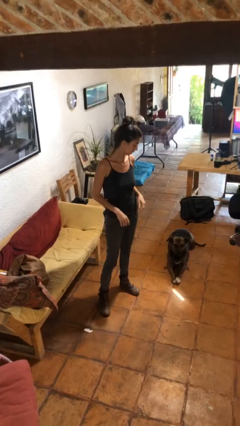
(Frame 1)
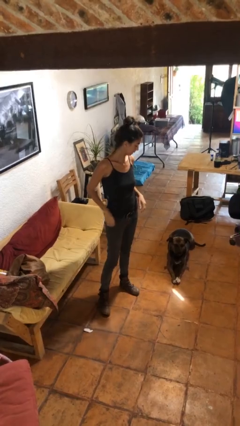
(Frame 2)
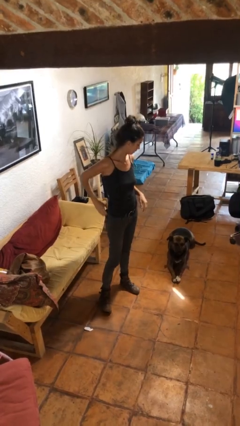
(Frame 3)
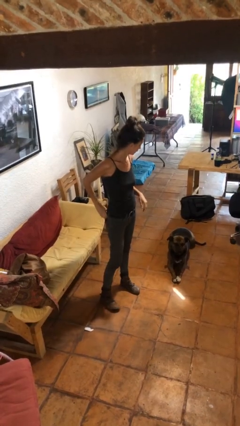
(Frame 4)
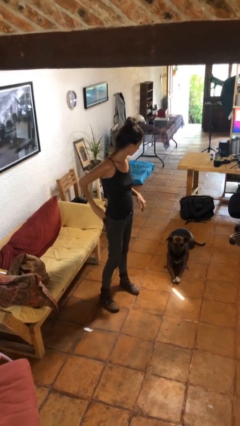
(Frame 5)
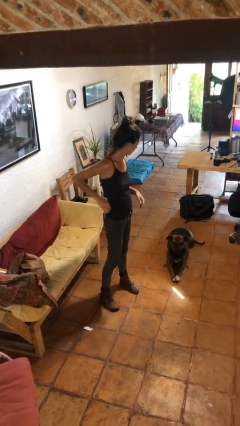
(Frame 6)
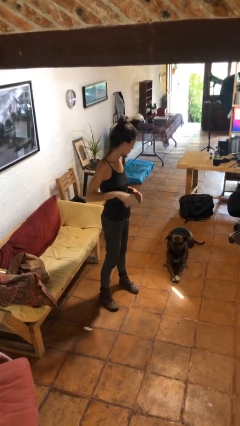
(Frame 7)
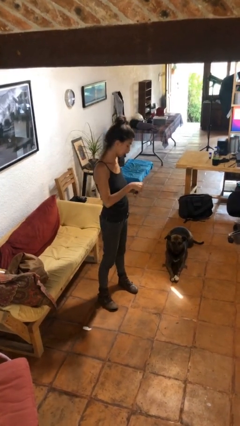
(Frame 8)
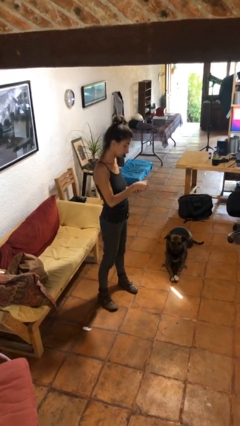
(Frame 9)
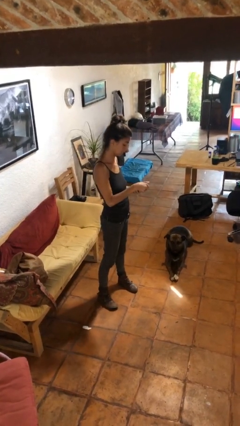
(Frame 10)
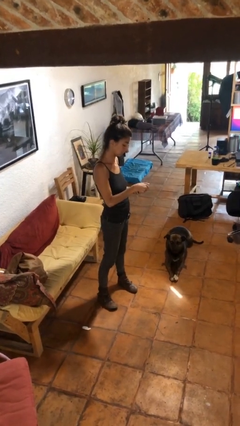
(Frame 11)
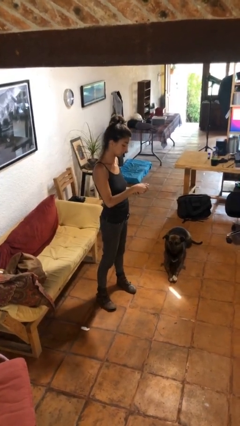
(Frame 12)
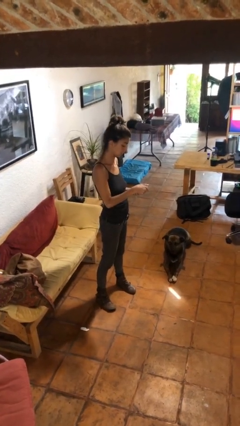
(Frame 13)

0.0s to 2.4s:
person takes phone from pocket

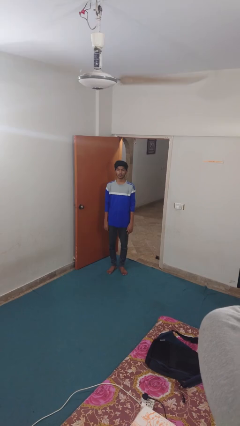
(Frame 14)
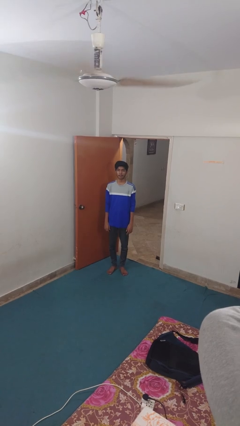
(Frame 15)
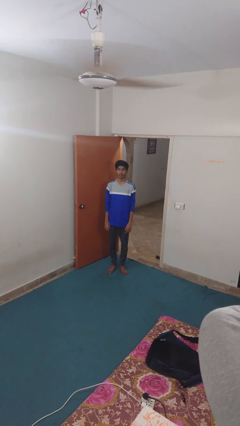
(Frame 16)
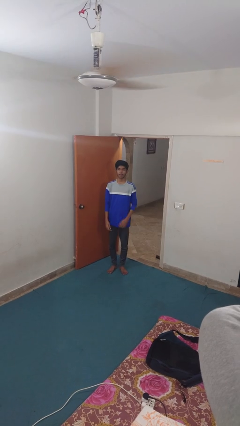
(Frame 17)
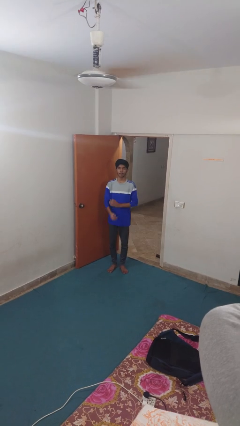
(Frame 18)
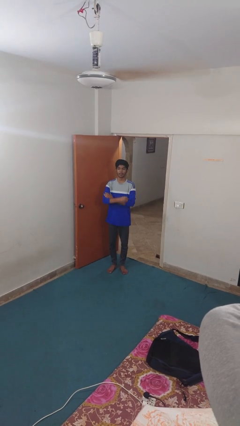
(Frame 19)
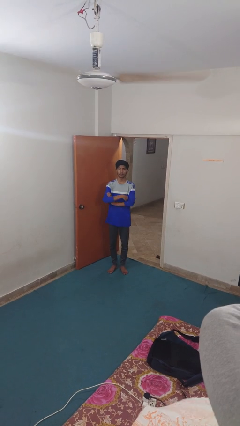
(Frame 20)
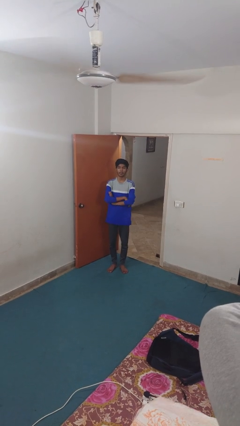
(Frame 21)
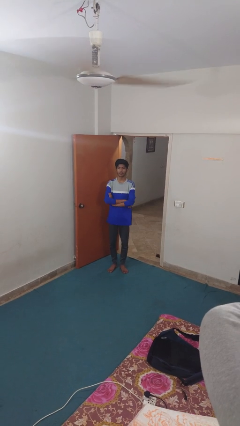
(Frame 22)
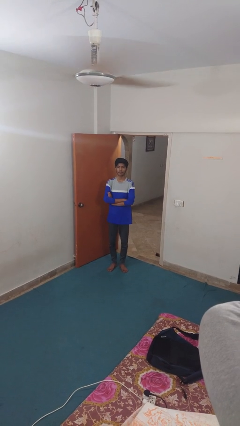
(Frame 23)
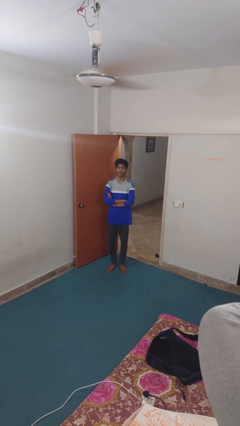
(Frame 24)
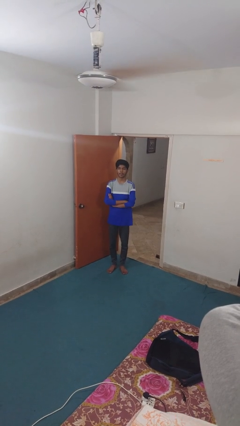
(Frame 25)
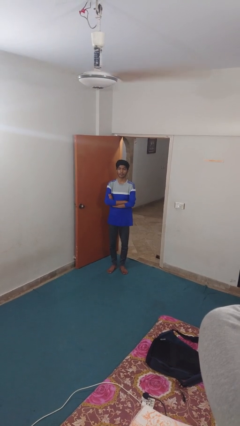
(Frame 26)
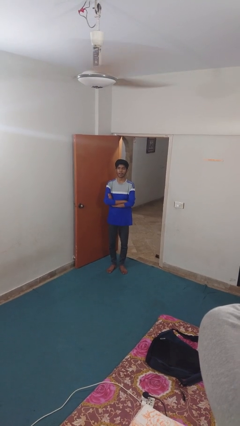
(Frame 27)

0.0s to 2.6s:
person crosses arms

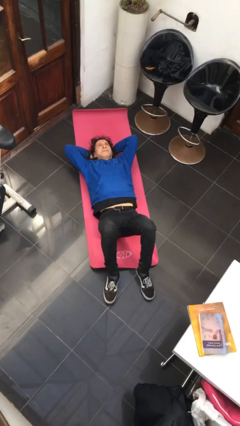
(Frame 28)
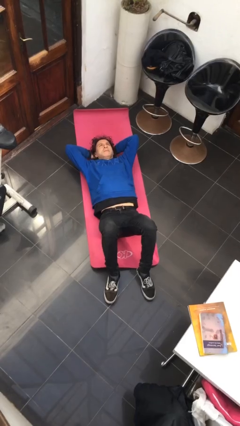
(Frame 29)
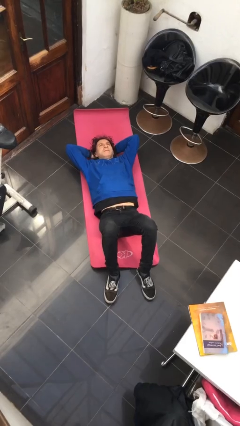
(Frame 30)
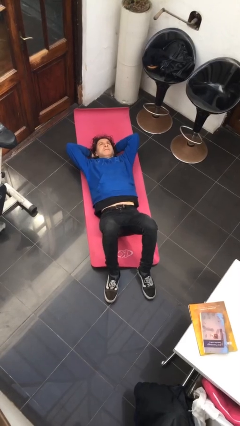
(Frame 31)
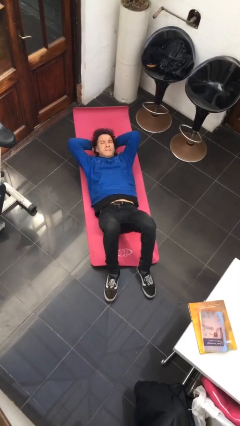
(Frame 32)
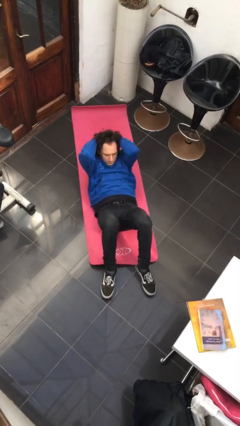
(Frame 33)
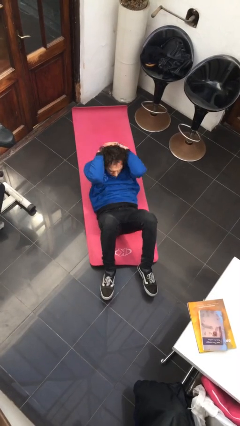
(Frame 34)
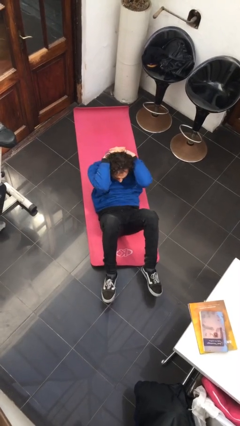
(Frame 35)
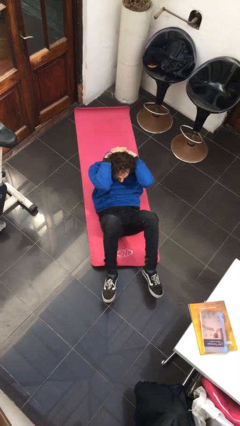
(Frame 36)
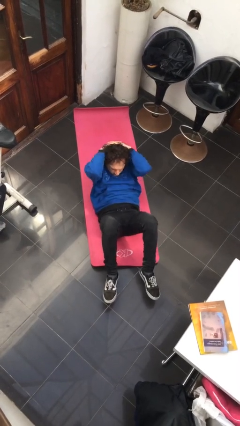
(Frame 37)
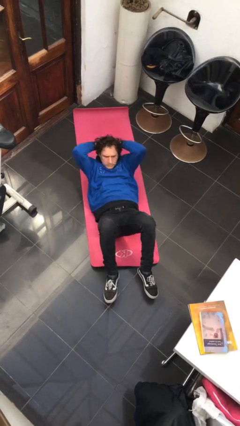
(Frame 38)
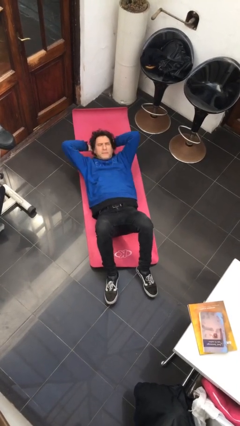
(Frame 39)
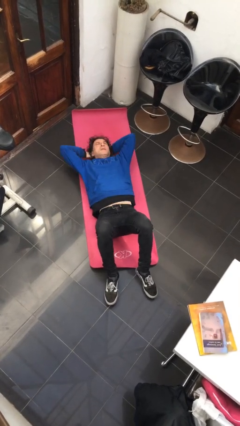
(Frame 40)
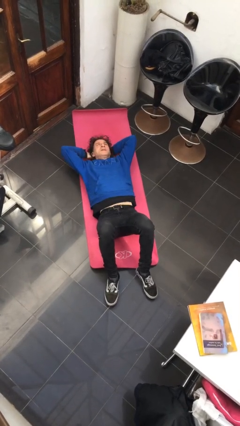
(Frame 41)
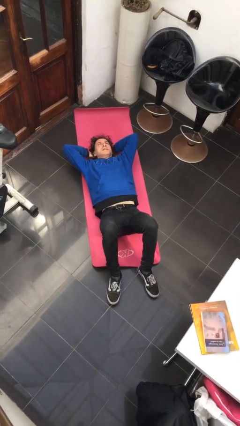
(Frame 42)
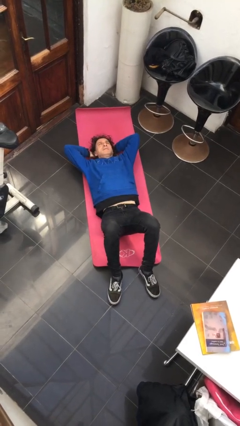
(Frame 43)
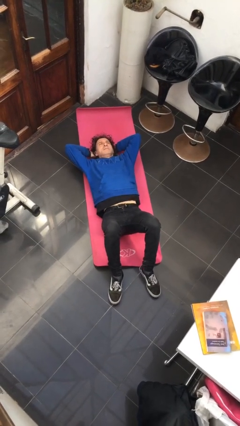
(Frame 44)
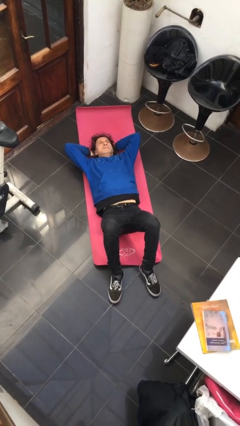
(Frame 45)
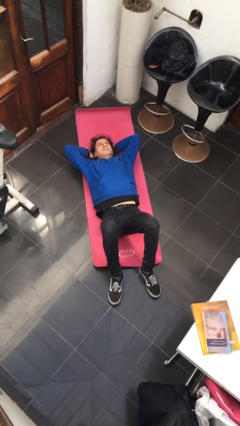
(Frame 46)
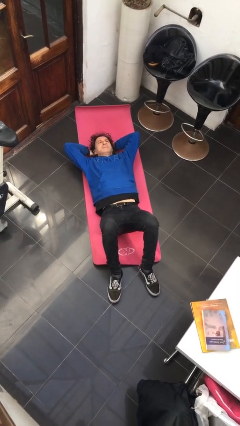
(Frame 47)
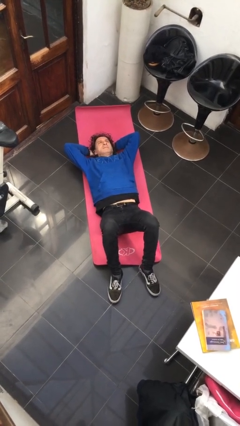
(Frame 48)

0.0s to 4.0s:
person exercises with situp

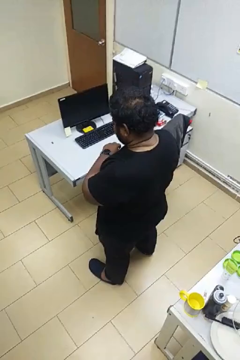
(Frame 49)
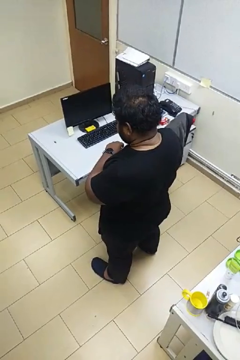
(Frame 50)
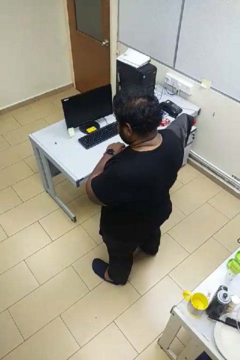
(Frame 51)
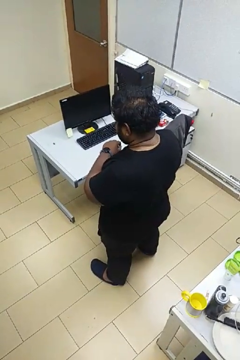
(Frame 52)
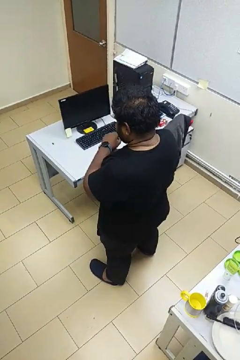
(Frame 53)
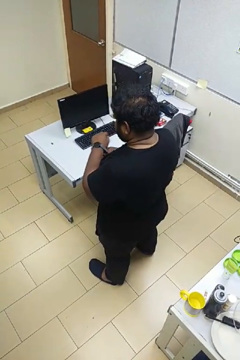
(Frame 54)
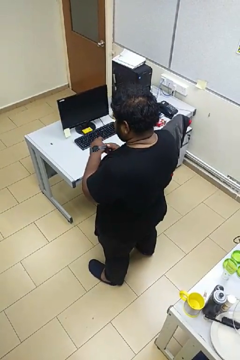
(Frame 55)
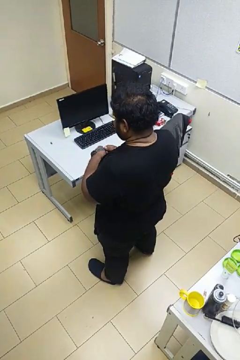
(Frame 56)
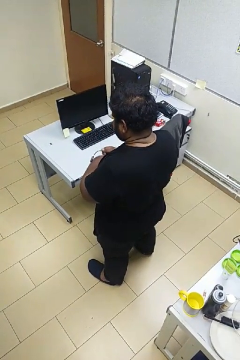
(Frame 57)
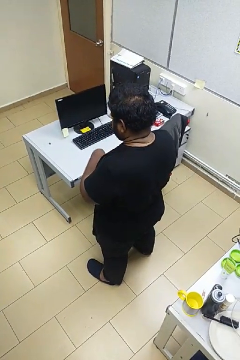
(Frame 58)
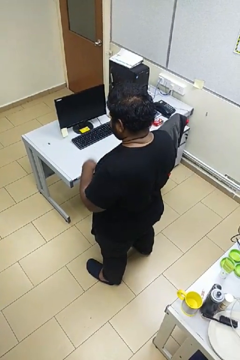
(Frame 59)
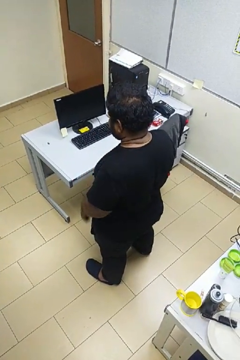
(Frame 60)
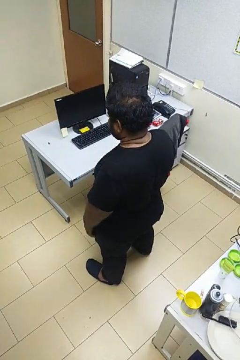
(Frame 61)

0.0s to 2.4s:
person takes off wristwatch

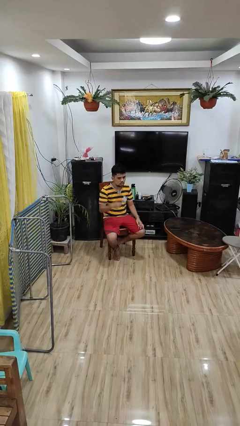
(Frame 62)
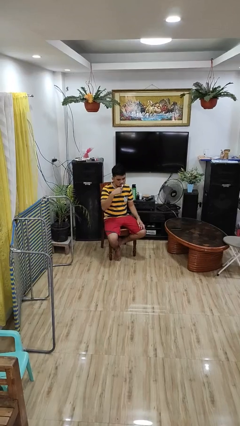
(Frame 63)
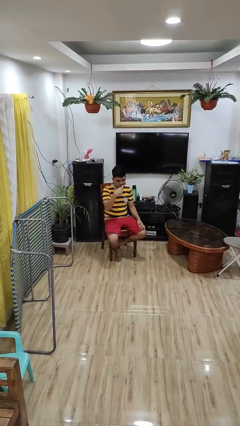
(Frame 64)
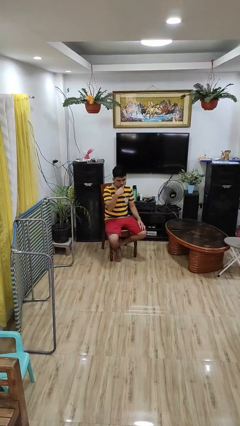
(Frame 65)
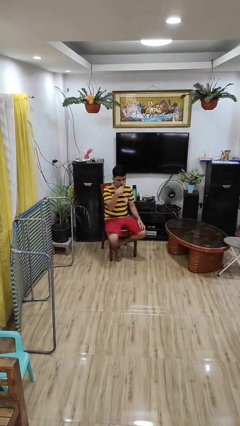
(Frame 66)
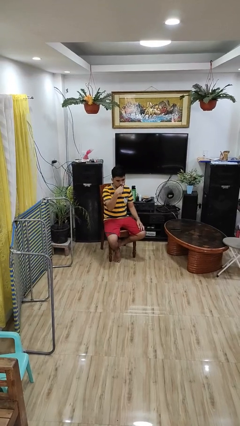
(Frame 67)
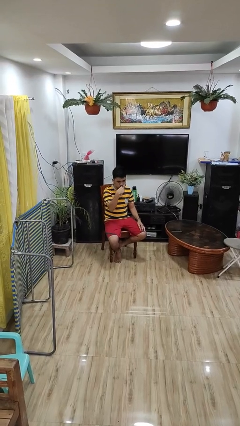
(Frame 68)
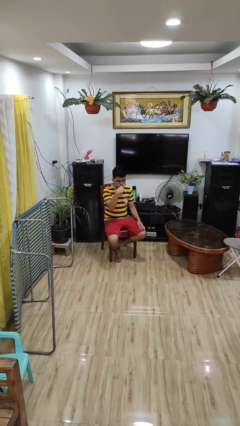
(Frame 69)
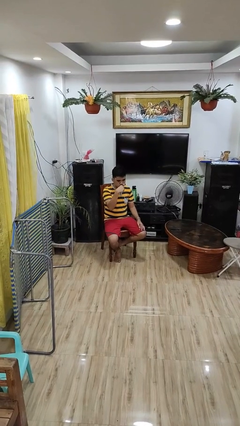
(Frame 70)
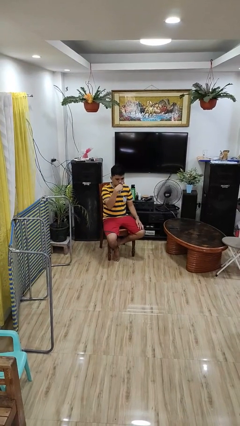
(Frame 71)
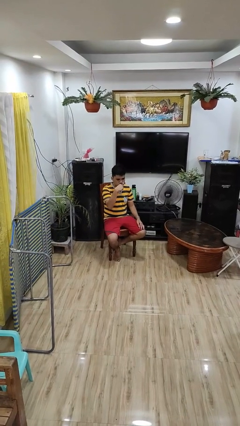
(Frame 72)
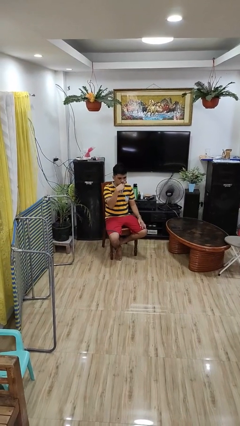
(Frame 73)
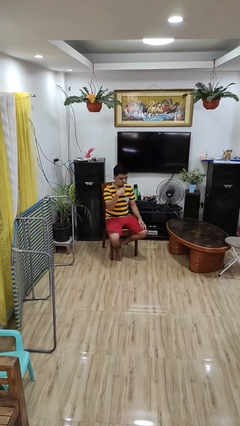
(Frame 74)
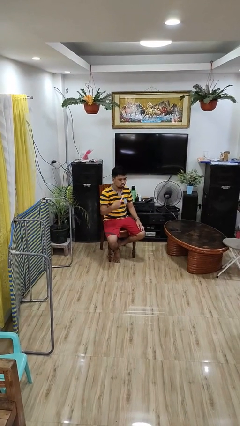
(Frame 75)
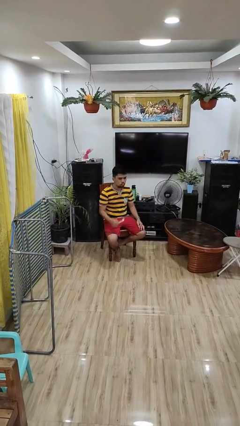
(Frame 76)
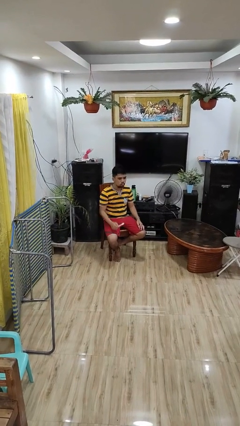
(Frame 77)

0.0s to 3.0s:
person brushes teeth

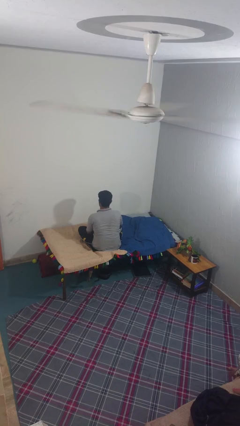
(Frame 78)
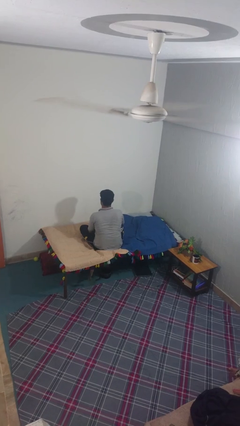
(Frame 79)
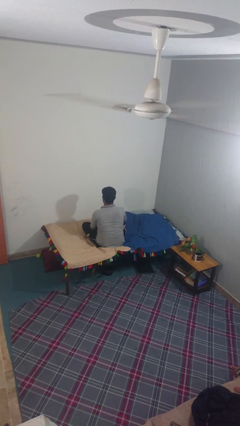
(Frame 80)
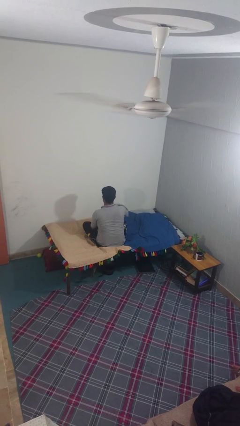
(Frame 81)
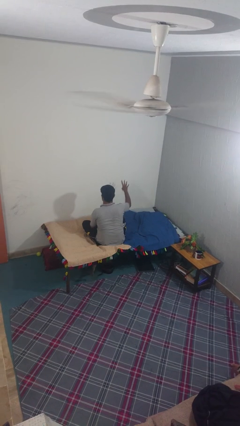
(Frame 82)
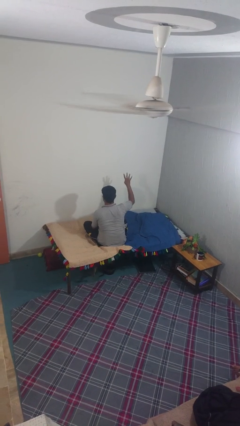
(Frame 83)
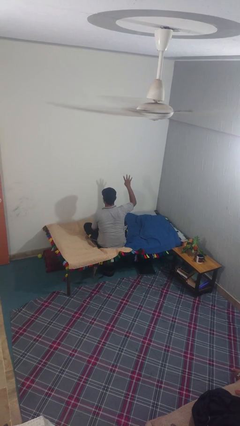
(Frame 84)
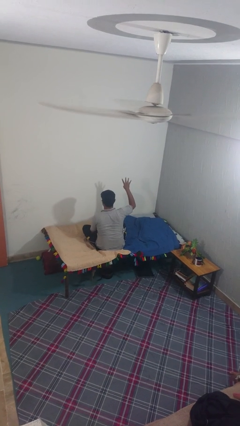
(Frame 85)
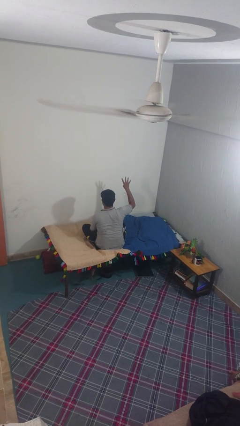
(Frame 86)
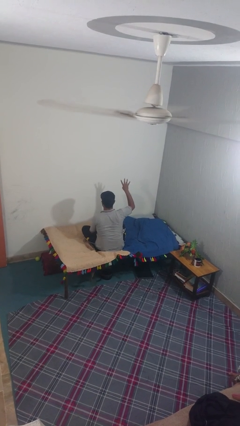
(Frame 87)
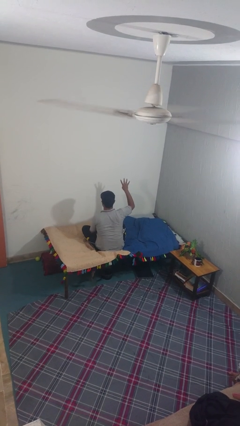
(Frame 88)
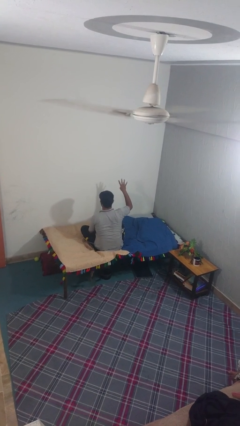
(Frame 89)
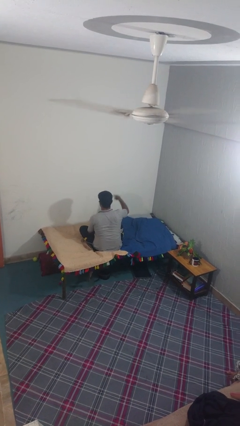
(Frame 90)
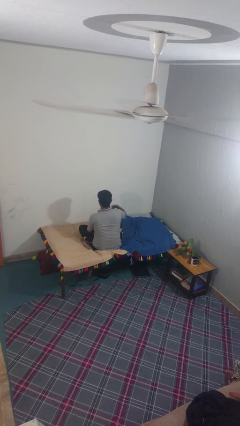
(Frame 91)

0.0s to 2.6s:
person gestures number four

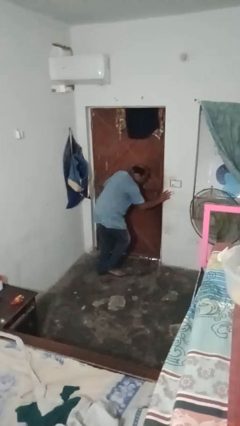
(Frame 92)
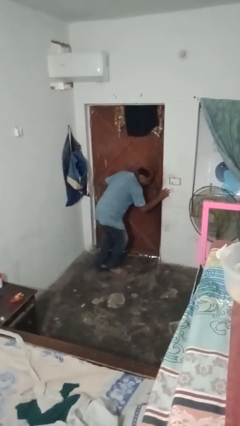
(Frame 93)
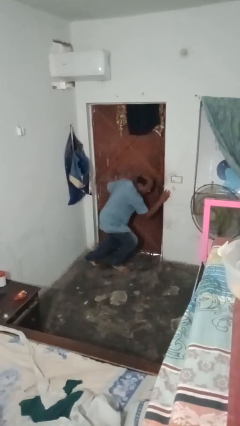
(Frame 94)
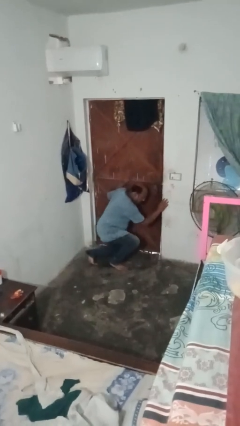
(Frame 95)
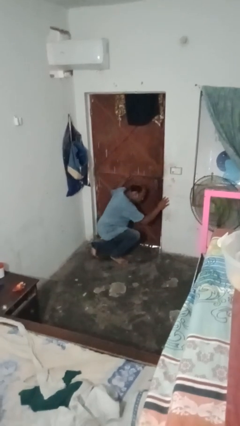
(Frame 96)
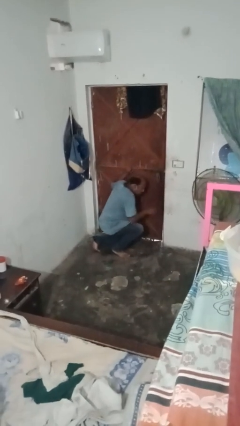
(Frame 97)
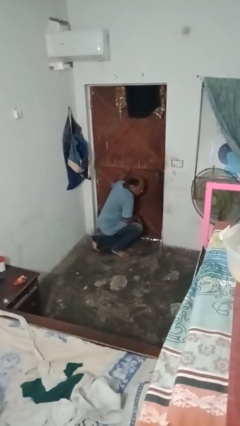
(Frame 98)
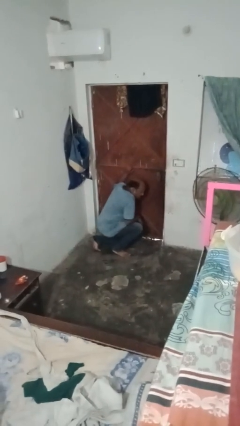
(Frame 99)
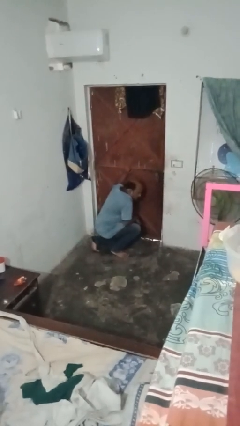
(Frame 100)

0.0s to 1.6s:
person bumps into wall
